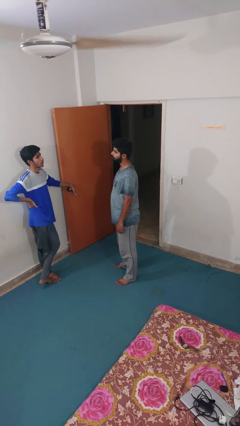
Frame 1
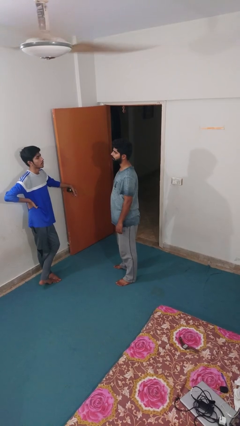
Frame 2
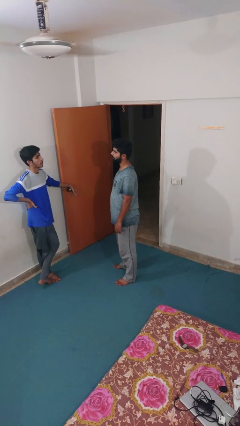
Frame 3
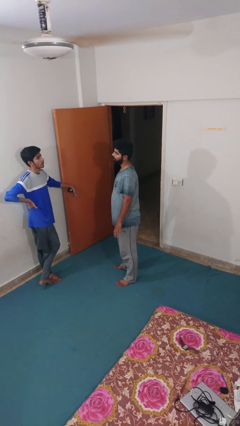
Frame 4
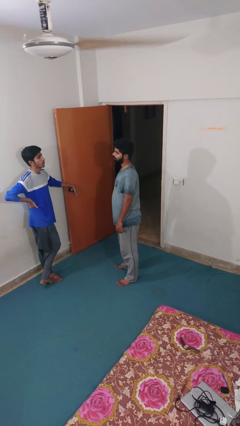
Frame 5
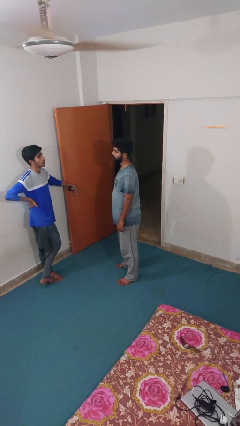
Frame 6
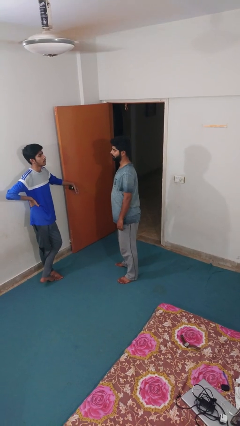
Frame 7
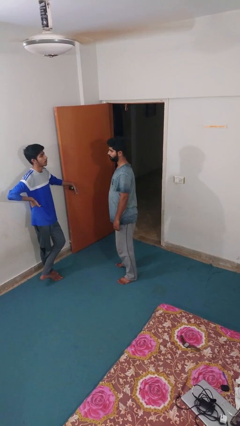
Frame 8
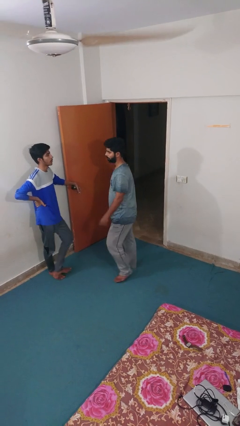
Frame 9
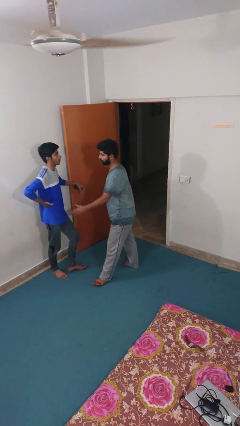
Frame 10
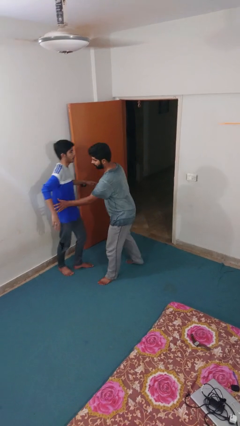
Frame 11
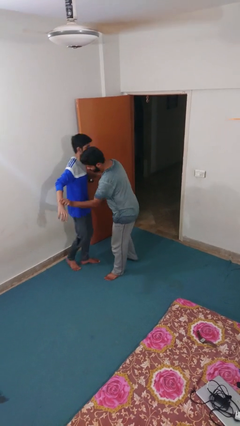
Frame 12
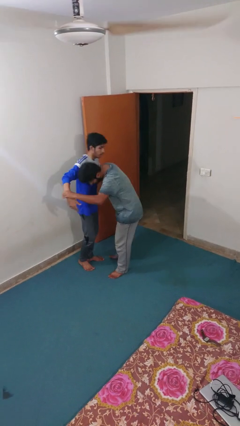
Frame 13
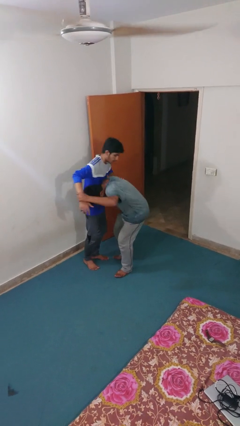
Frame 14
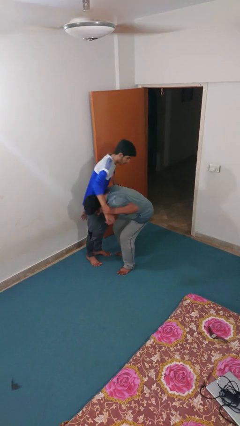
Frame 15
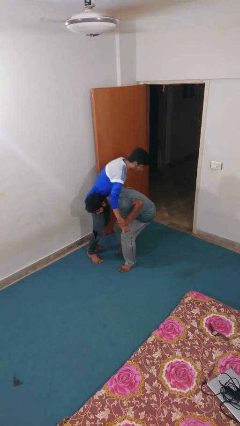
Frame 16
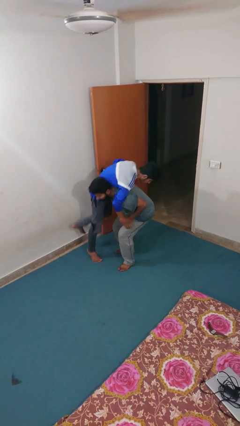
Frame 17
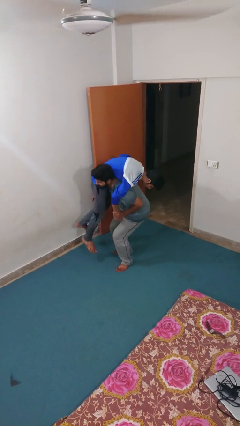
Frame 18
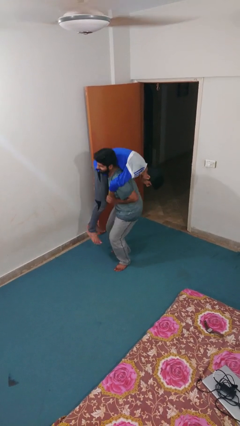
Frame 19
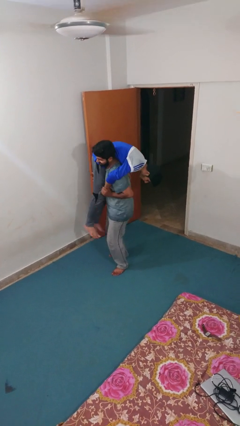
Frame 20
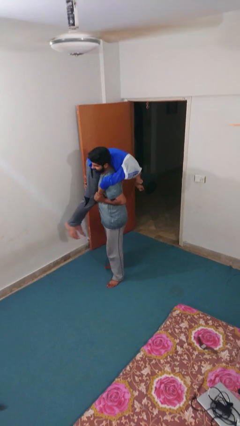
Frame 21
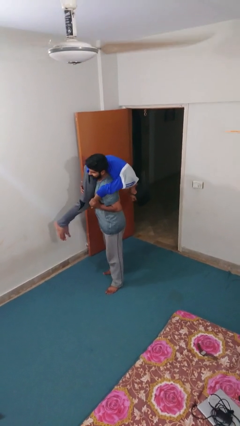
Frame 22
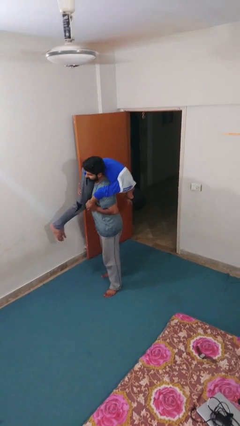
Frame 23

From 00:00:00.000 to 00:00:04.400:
person carries person over shoulder

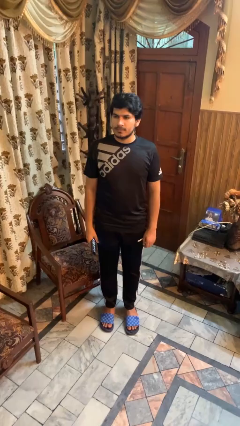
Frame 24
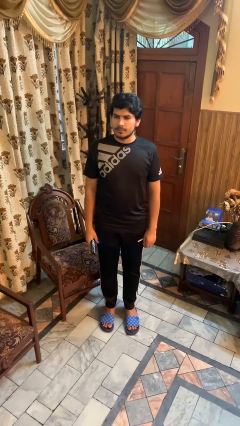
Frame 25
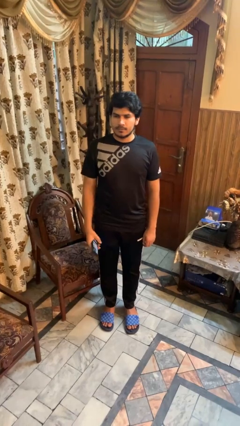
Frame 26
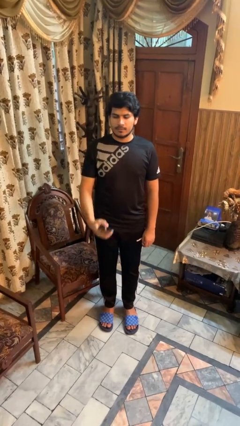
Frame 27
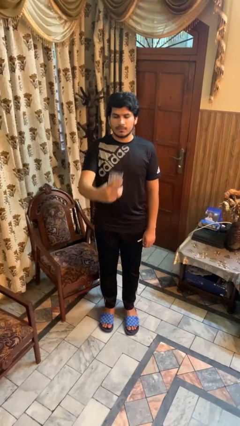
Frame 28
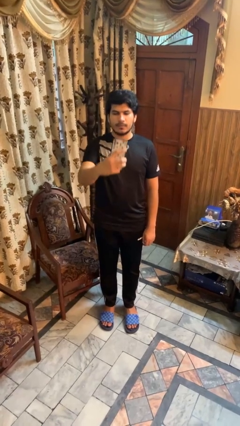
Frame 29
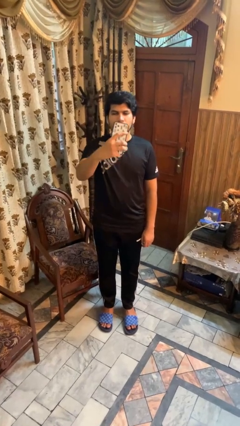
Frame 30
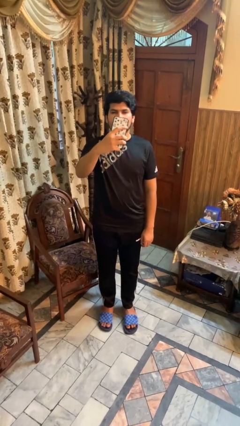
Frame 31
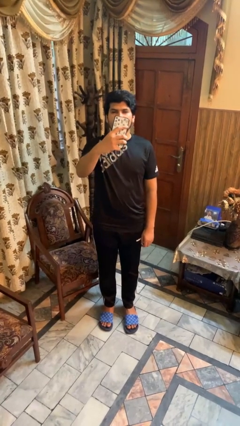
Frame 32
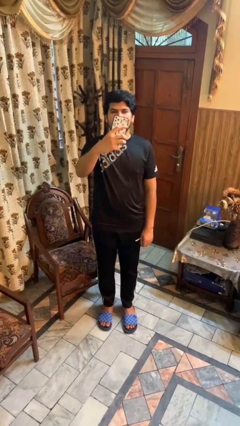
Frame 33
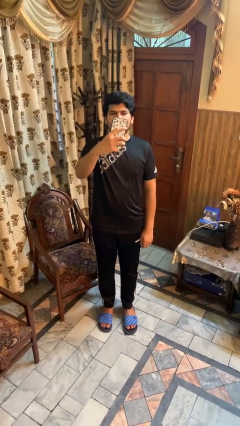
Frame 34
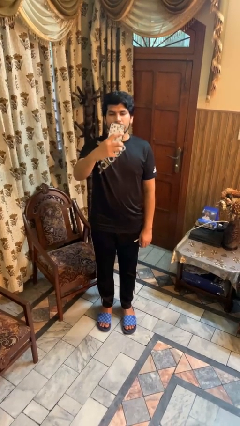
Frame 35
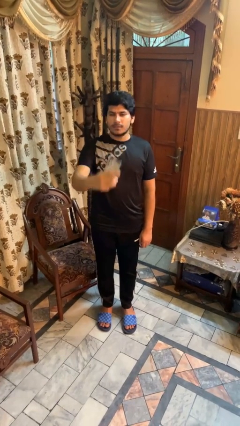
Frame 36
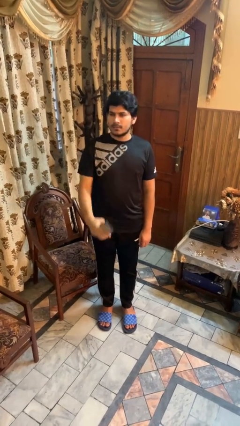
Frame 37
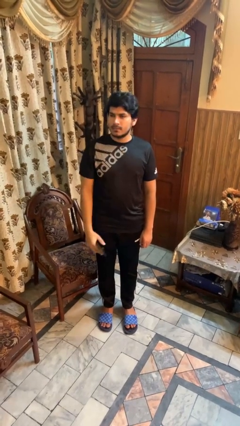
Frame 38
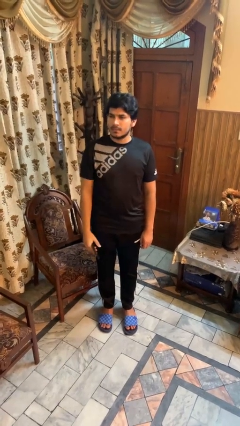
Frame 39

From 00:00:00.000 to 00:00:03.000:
person takes selfie

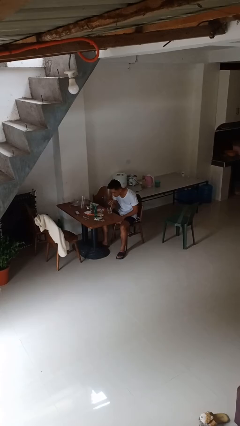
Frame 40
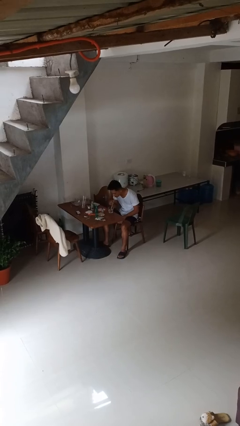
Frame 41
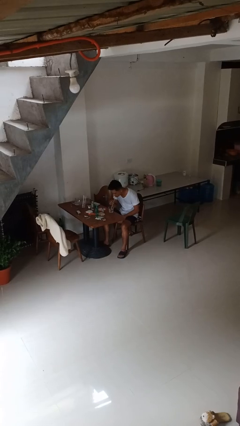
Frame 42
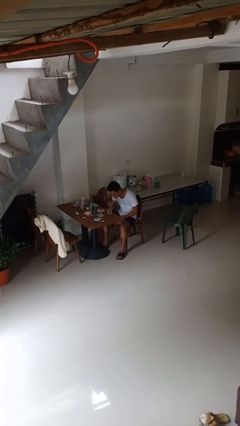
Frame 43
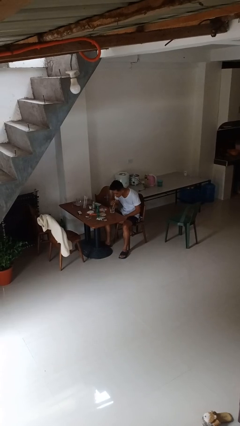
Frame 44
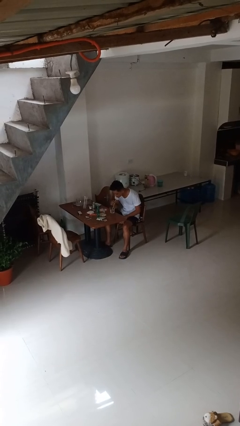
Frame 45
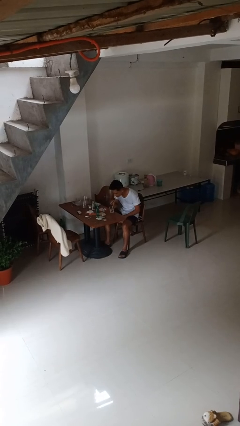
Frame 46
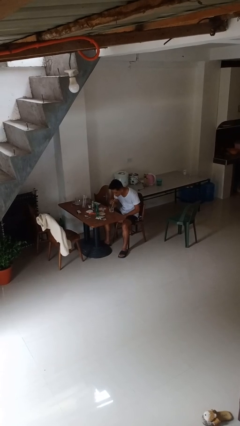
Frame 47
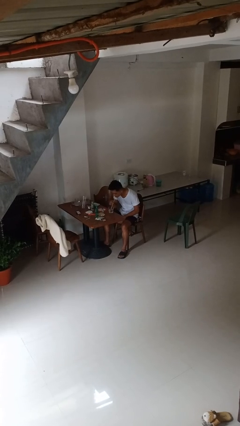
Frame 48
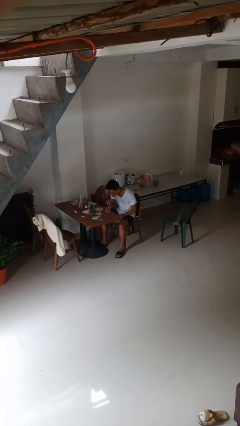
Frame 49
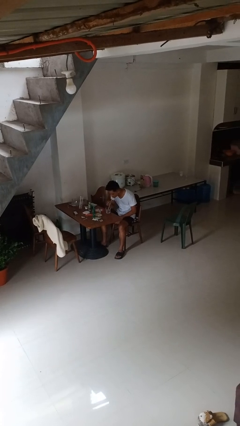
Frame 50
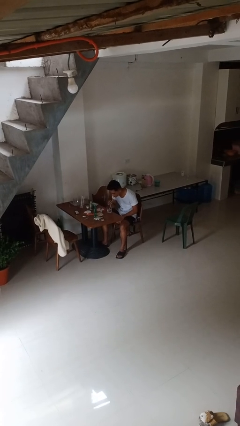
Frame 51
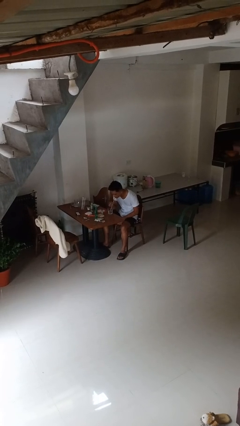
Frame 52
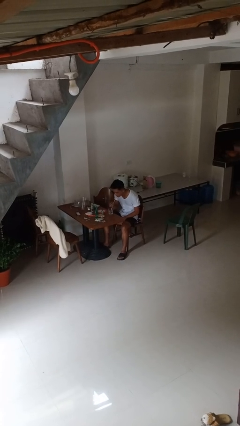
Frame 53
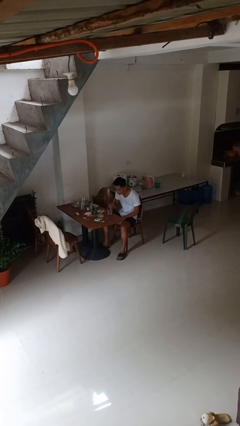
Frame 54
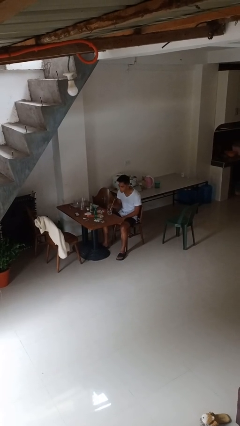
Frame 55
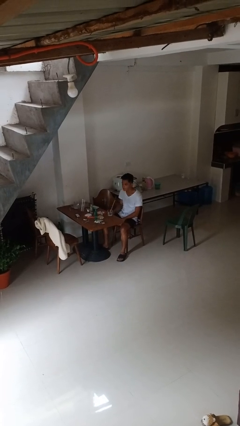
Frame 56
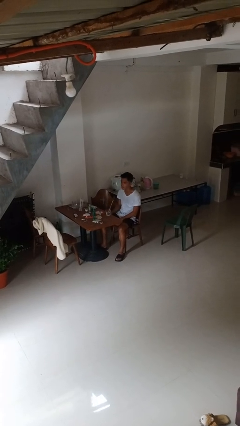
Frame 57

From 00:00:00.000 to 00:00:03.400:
person drinks from straw

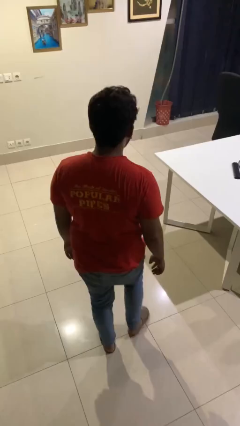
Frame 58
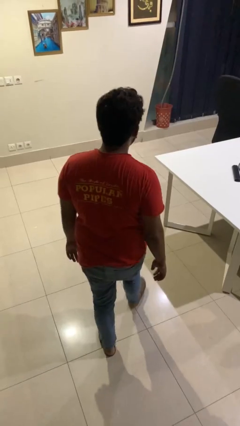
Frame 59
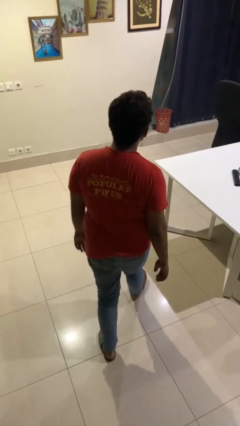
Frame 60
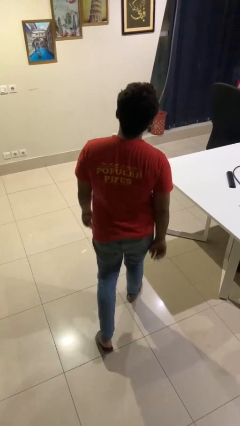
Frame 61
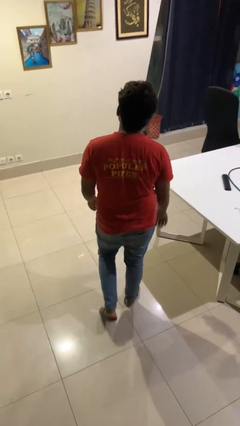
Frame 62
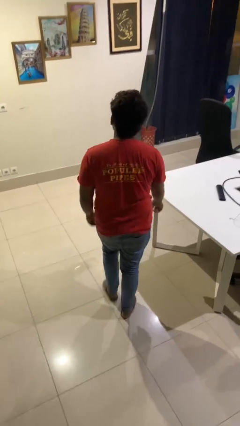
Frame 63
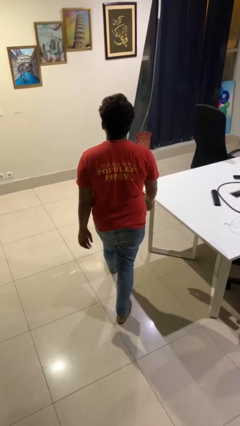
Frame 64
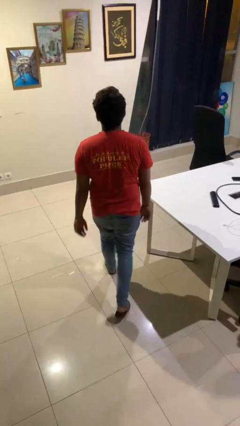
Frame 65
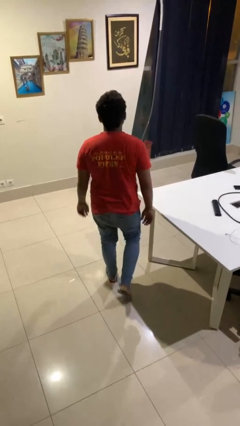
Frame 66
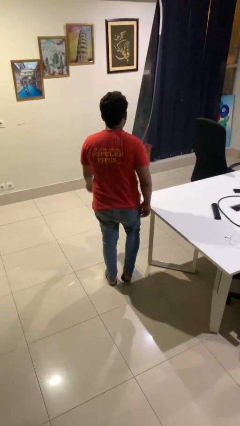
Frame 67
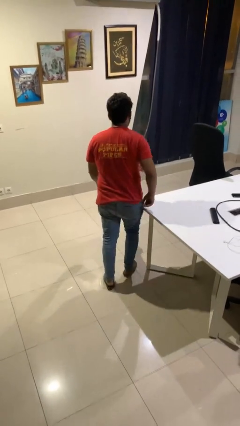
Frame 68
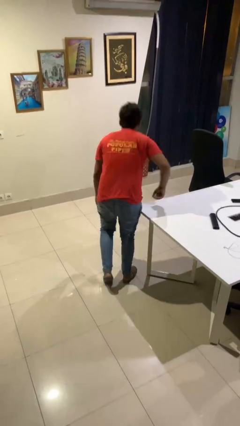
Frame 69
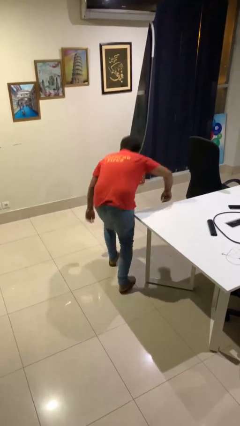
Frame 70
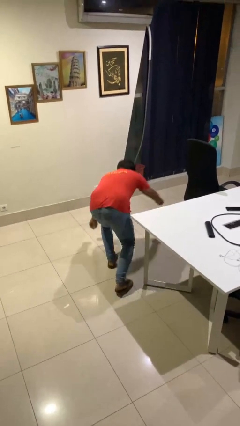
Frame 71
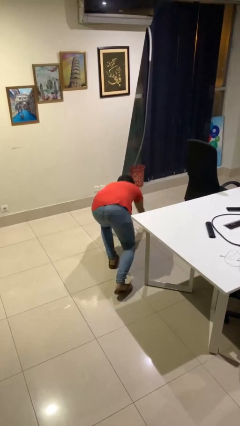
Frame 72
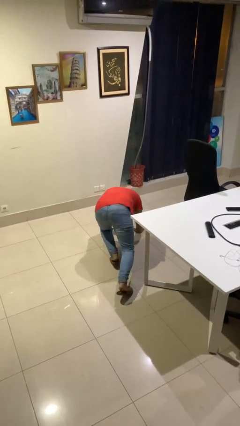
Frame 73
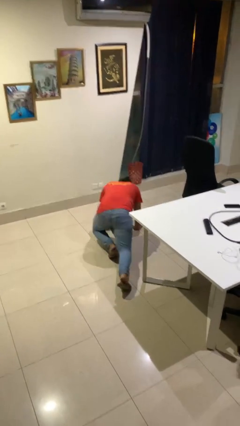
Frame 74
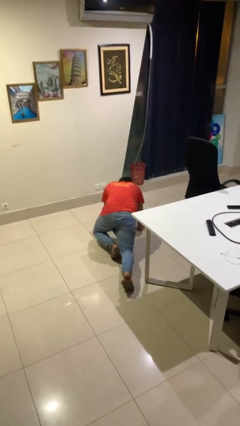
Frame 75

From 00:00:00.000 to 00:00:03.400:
person trips on object on floor

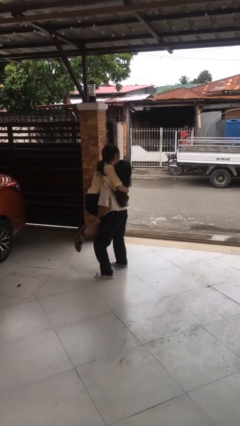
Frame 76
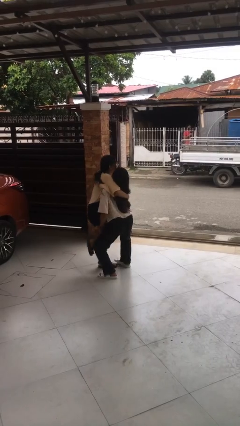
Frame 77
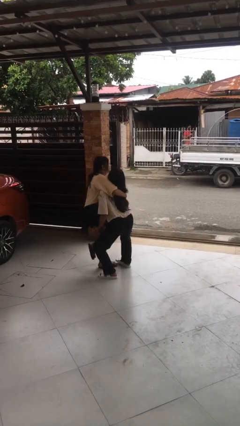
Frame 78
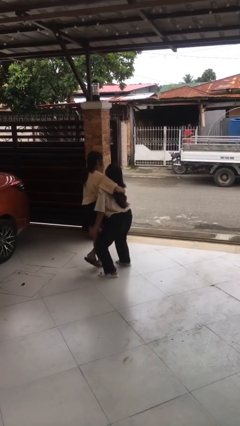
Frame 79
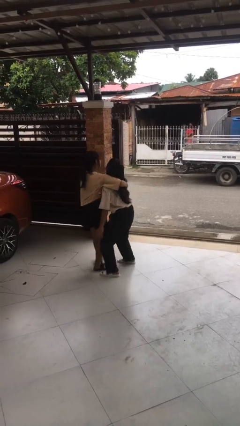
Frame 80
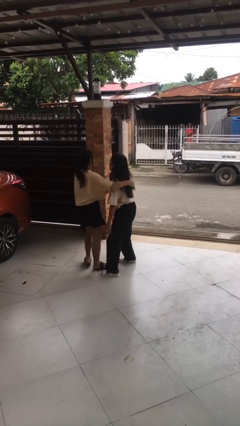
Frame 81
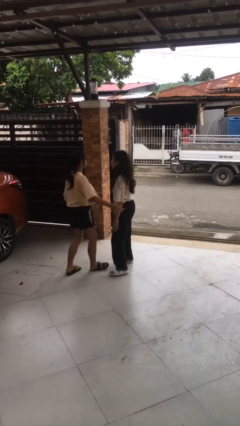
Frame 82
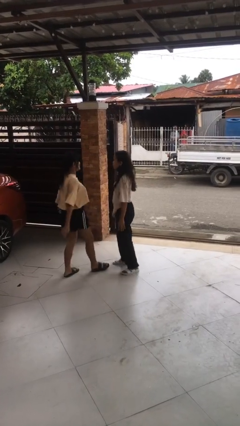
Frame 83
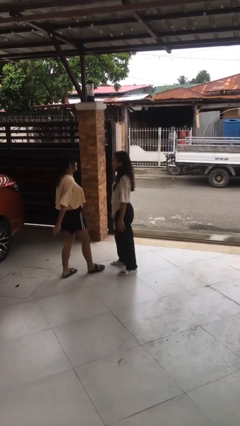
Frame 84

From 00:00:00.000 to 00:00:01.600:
person puts down person

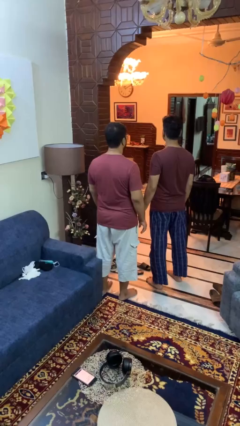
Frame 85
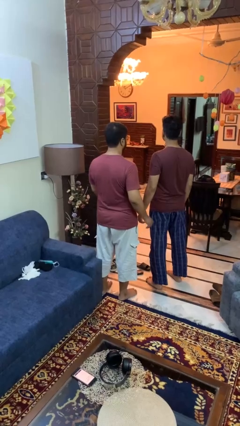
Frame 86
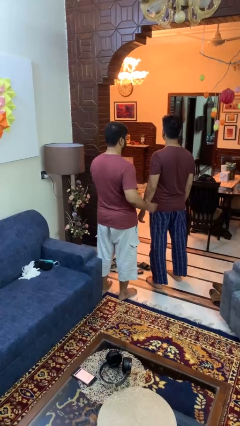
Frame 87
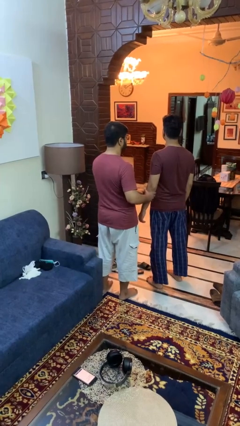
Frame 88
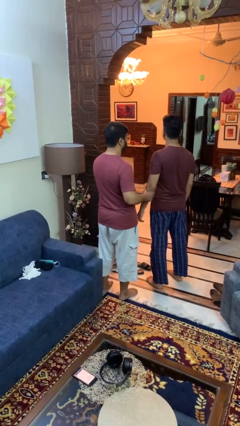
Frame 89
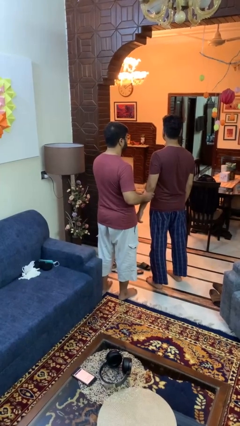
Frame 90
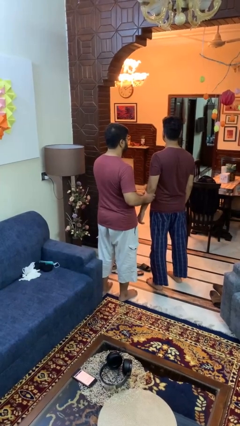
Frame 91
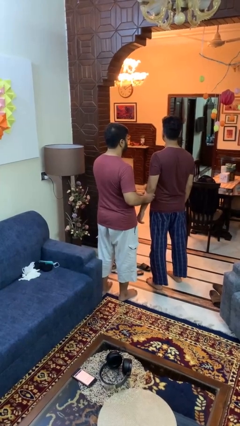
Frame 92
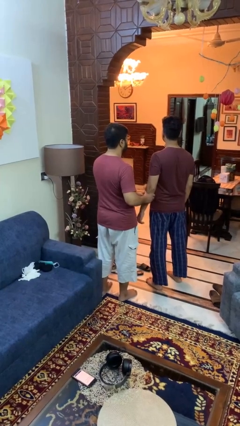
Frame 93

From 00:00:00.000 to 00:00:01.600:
person grabs person by forearm
